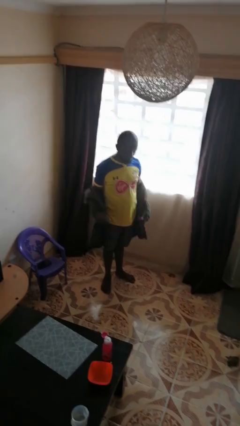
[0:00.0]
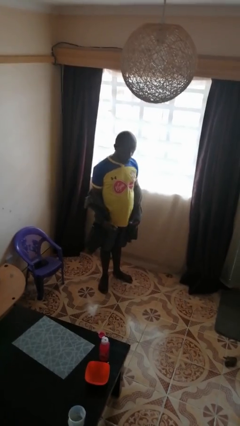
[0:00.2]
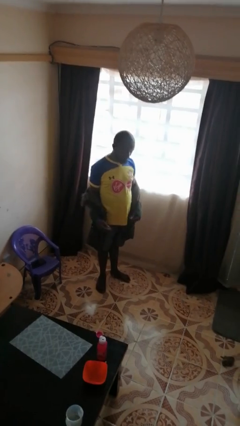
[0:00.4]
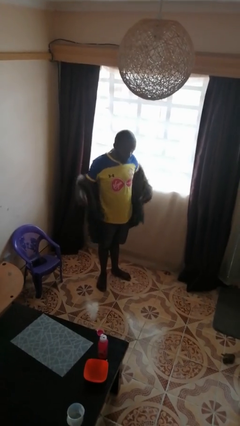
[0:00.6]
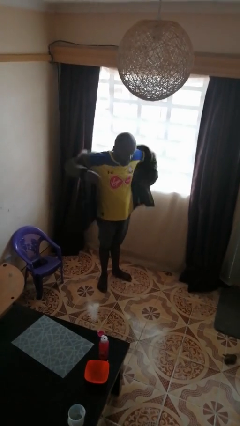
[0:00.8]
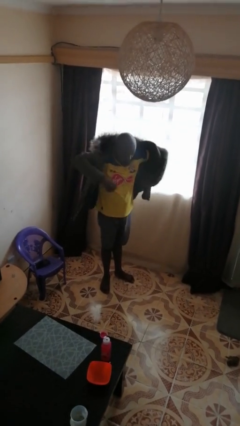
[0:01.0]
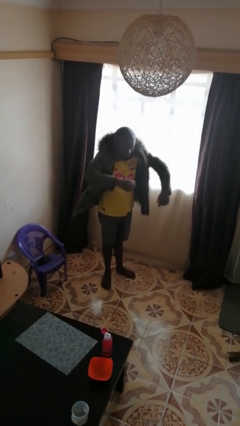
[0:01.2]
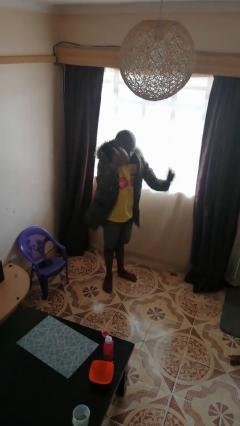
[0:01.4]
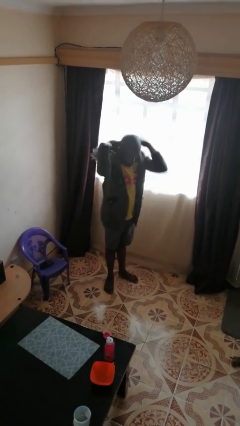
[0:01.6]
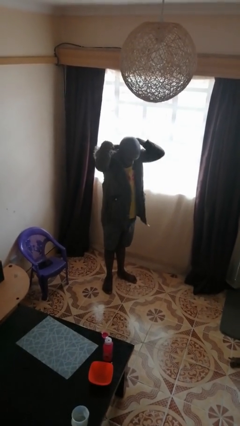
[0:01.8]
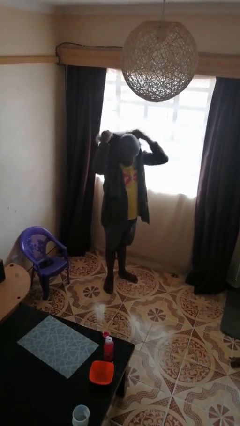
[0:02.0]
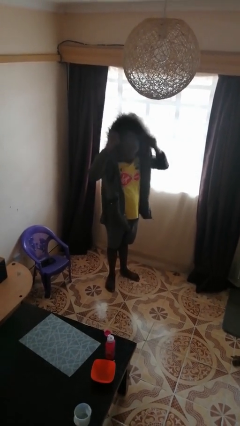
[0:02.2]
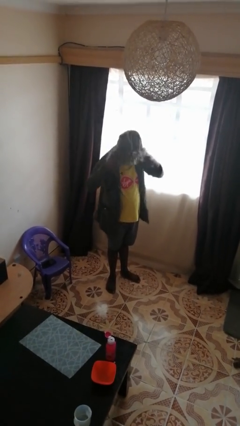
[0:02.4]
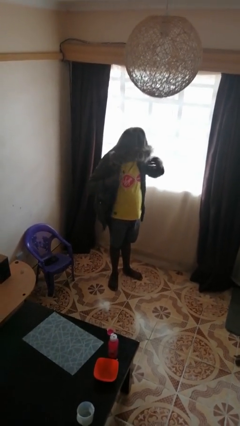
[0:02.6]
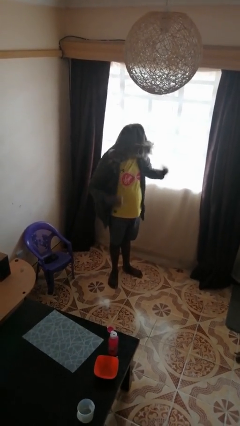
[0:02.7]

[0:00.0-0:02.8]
person puts on hoodie

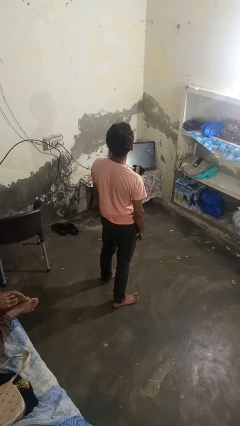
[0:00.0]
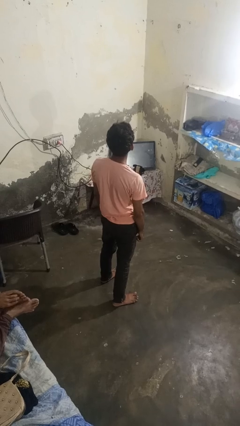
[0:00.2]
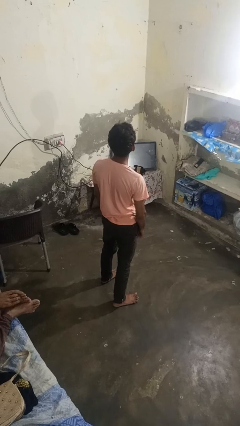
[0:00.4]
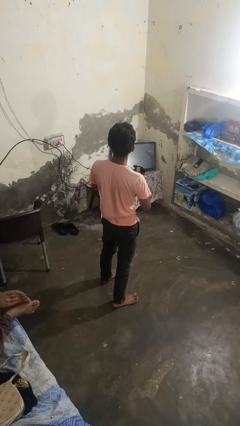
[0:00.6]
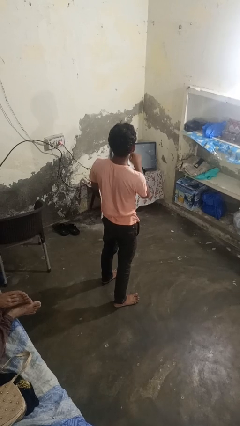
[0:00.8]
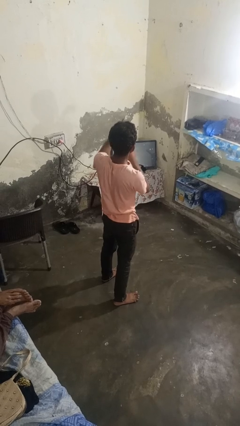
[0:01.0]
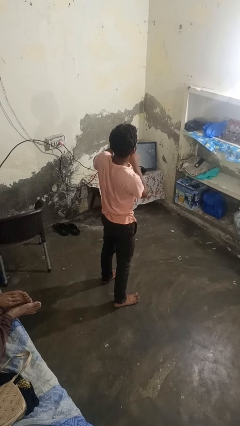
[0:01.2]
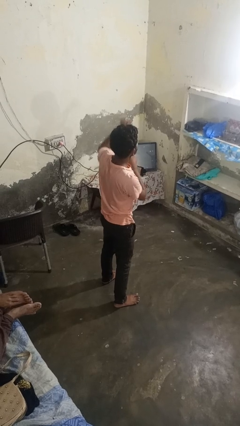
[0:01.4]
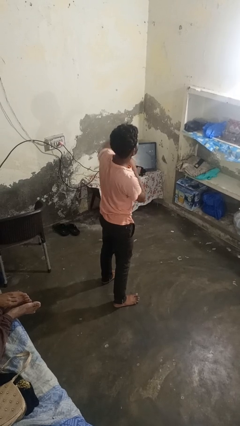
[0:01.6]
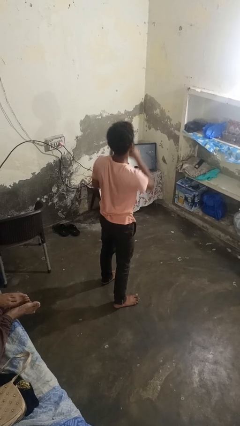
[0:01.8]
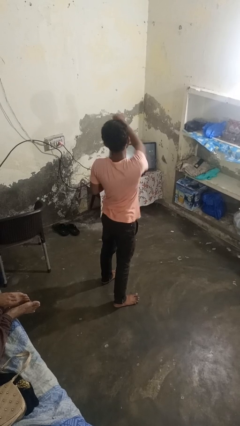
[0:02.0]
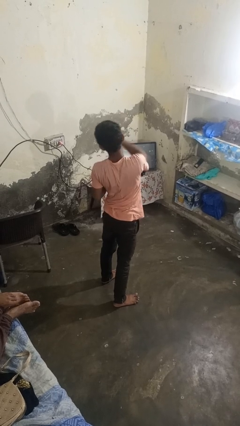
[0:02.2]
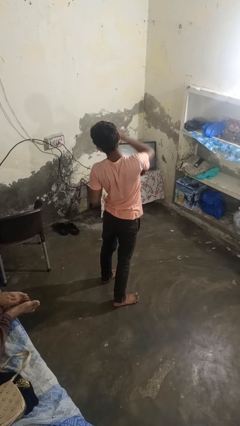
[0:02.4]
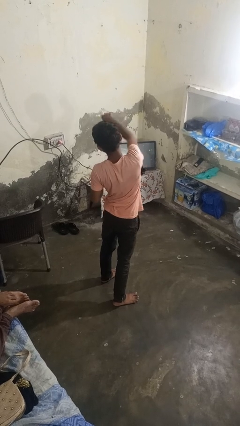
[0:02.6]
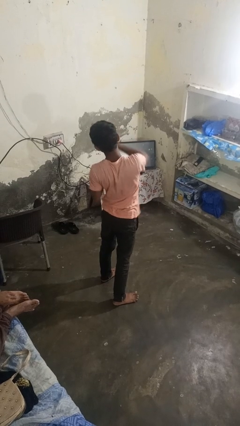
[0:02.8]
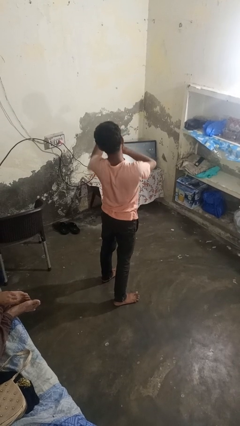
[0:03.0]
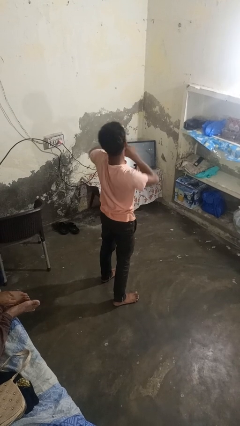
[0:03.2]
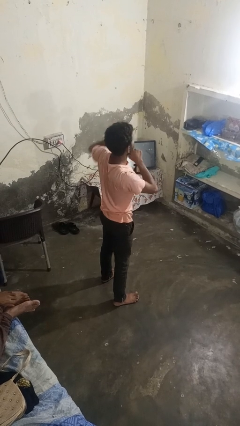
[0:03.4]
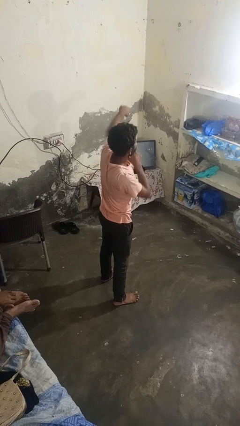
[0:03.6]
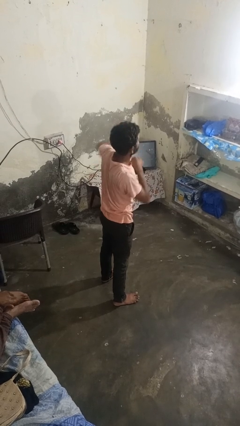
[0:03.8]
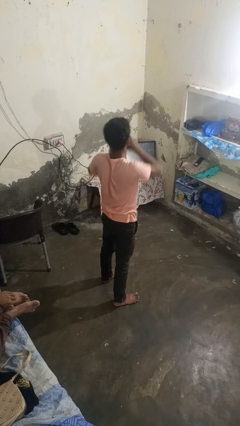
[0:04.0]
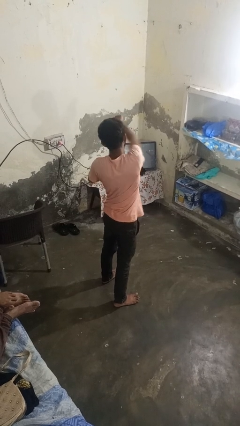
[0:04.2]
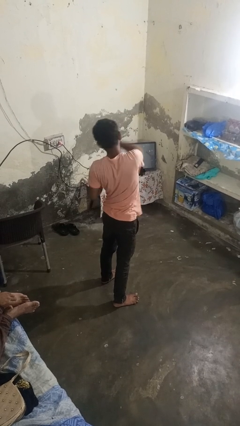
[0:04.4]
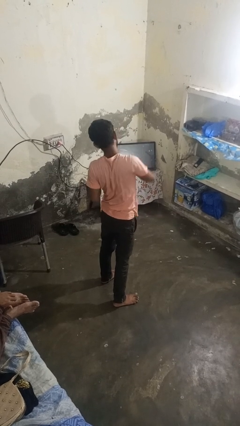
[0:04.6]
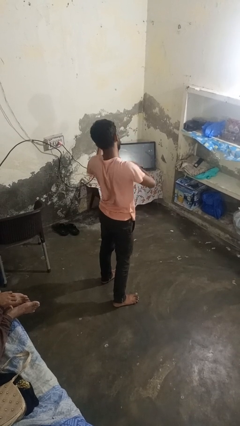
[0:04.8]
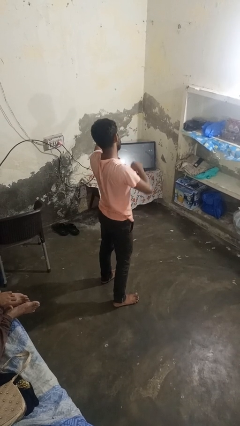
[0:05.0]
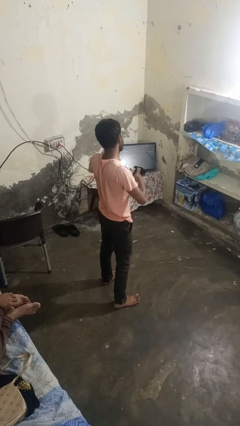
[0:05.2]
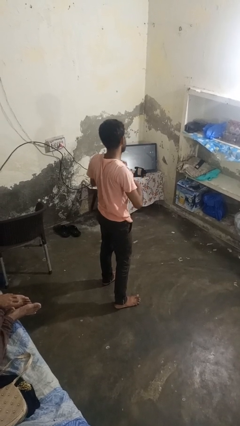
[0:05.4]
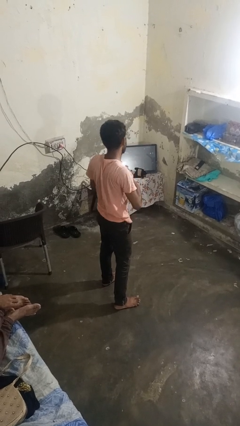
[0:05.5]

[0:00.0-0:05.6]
person punches

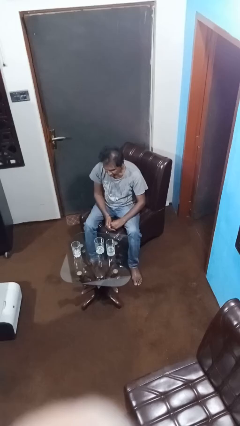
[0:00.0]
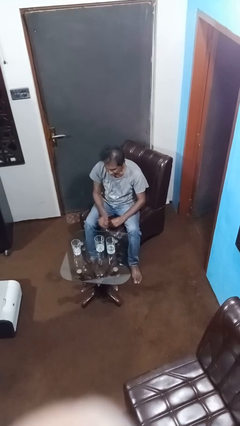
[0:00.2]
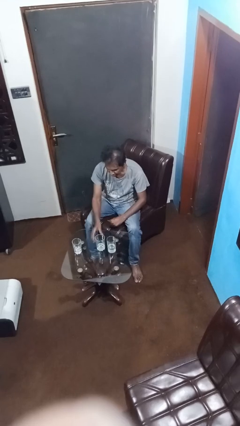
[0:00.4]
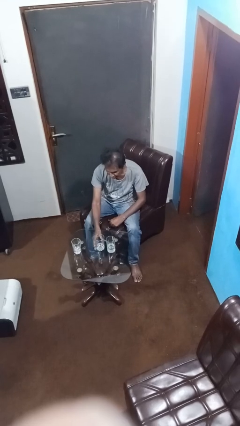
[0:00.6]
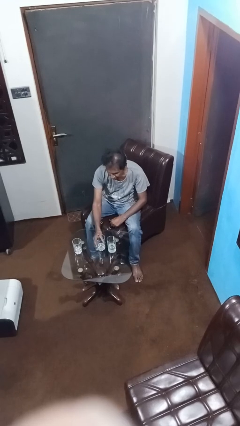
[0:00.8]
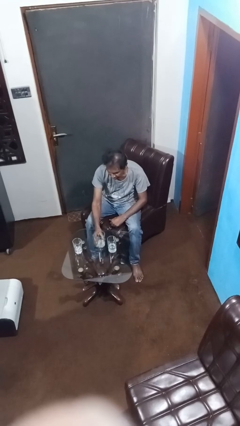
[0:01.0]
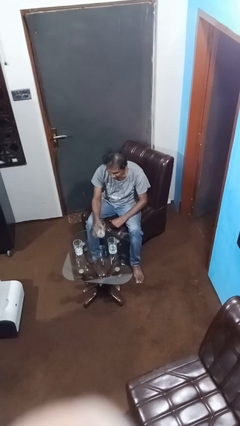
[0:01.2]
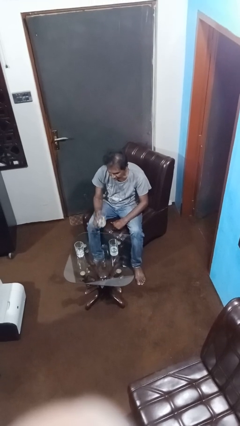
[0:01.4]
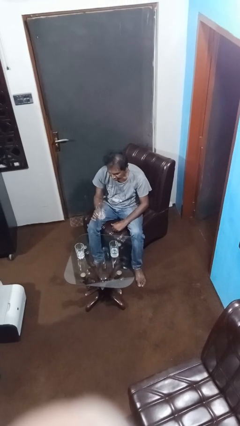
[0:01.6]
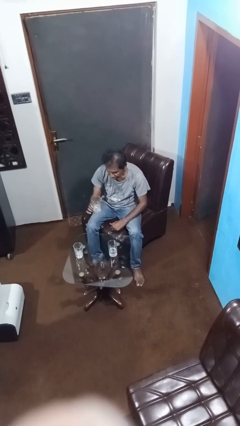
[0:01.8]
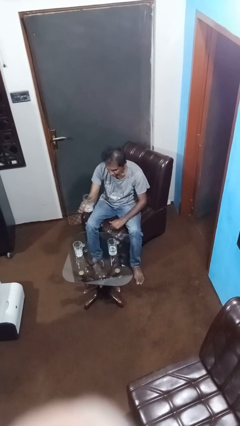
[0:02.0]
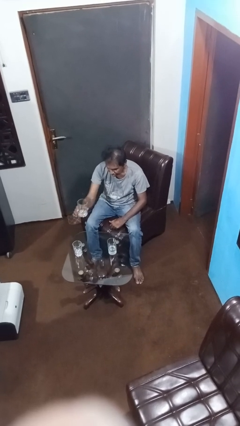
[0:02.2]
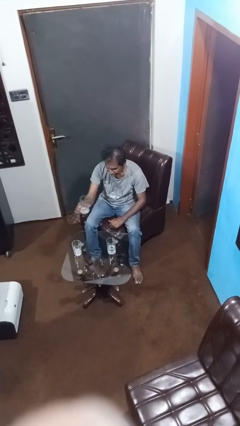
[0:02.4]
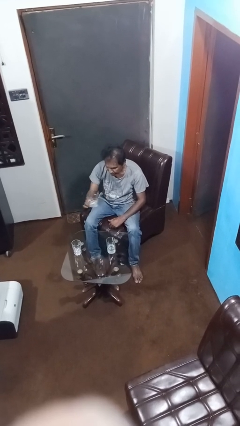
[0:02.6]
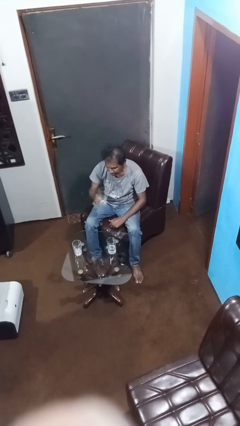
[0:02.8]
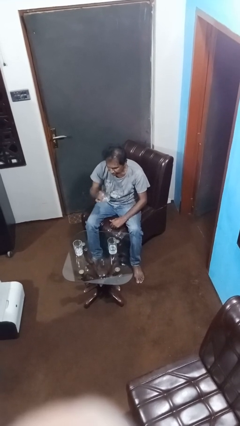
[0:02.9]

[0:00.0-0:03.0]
person picks up object from table

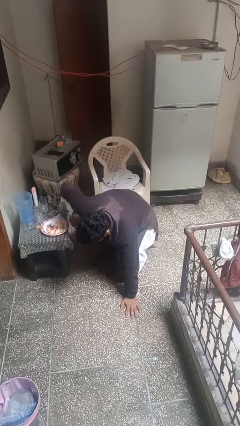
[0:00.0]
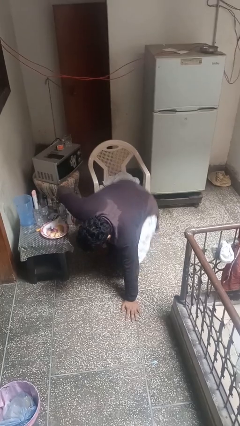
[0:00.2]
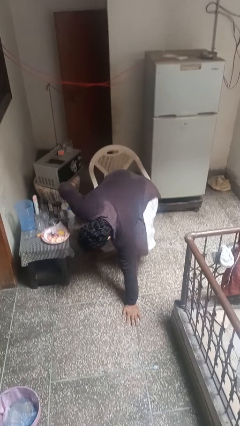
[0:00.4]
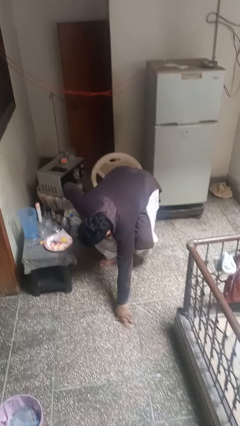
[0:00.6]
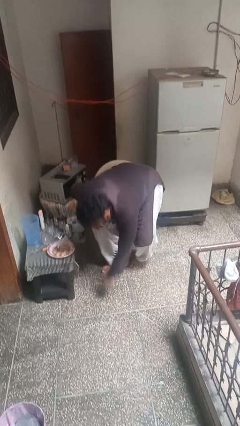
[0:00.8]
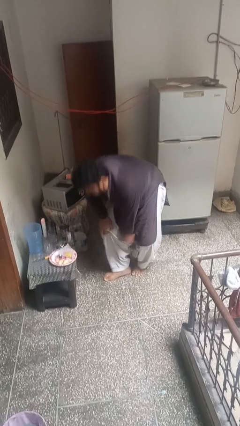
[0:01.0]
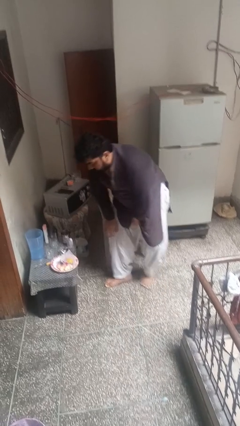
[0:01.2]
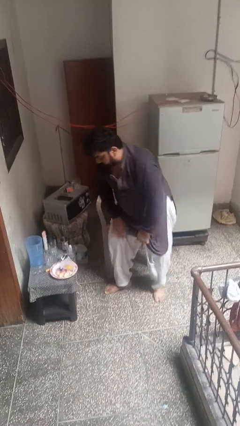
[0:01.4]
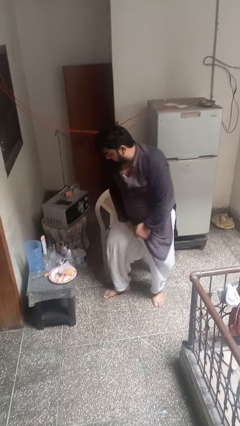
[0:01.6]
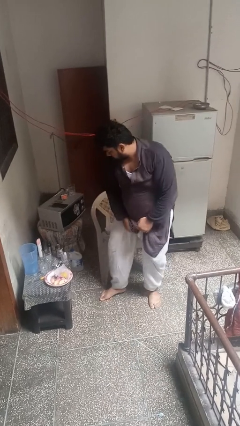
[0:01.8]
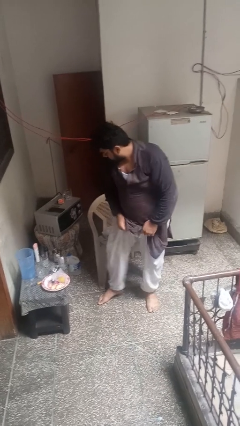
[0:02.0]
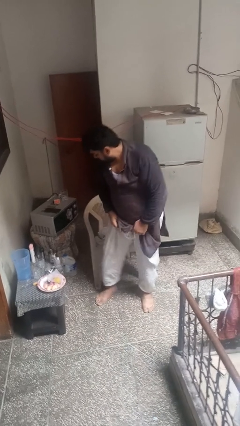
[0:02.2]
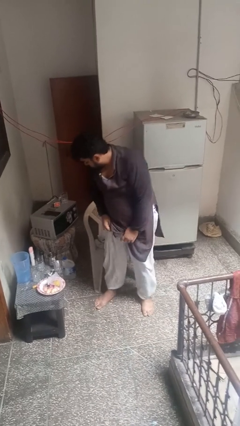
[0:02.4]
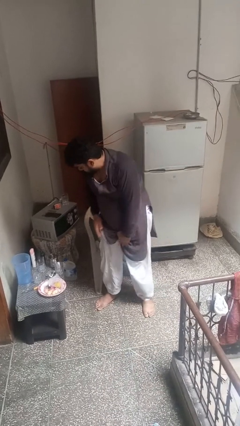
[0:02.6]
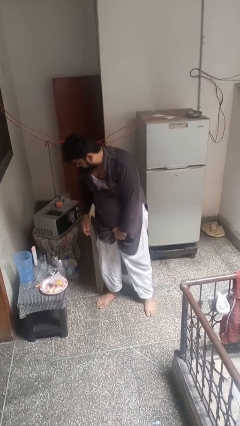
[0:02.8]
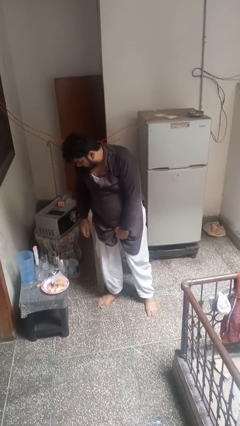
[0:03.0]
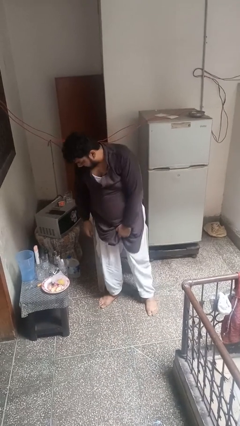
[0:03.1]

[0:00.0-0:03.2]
person stands up from floor

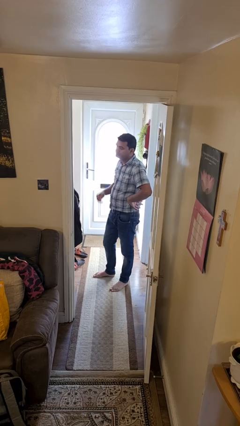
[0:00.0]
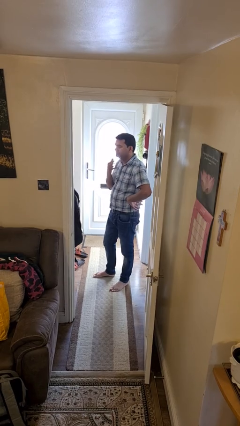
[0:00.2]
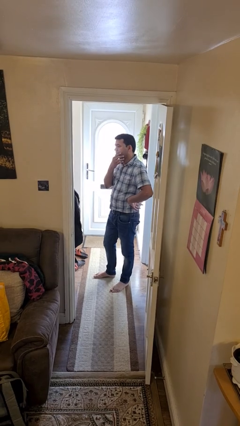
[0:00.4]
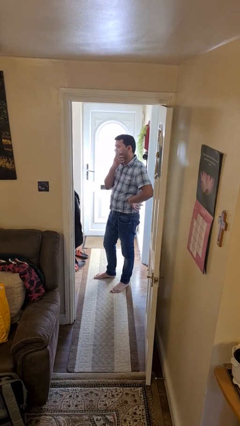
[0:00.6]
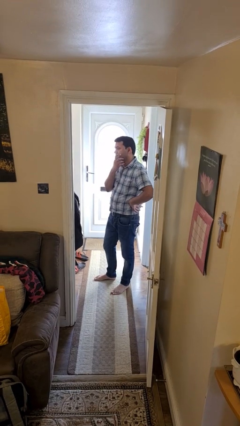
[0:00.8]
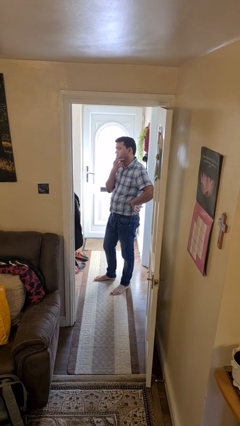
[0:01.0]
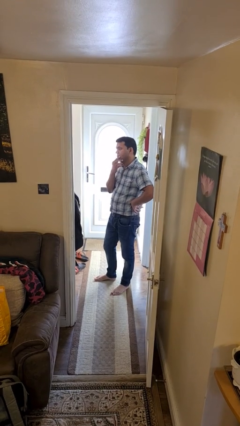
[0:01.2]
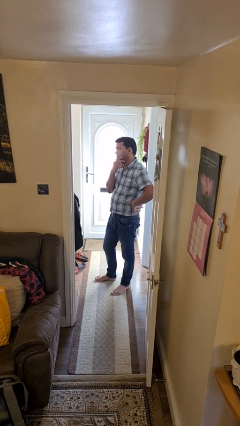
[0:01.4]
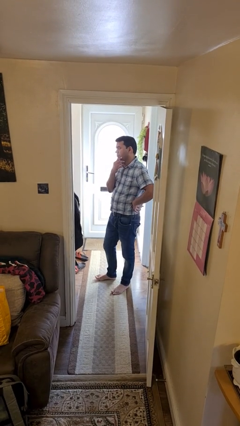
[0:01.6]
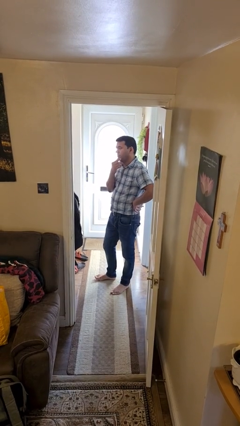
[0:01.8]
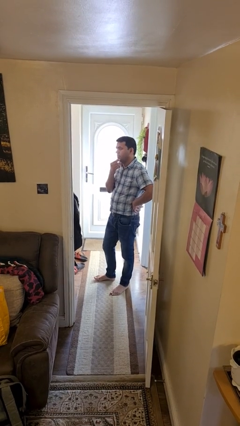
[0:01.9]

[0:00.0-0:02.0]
person strokes chin

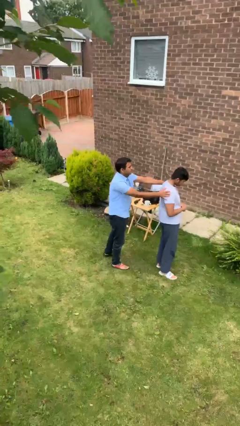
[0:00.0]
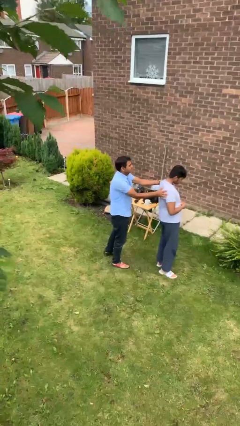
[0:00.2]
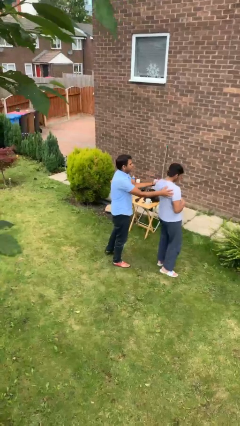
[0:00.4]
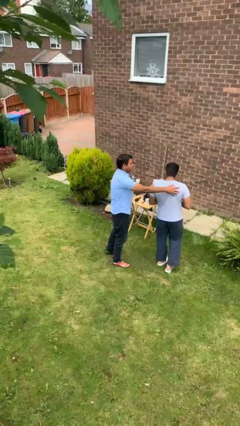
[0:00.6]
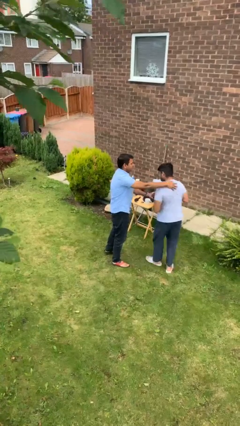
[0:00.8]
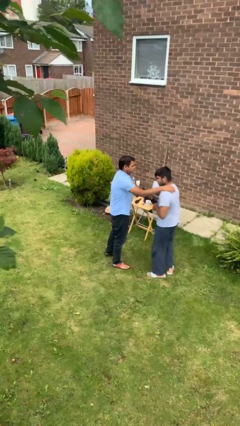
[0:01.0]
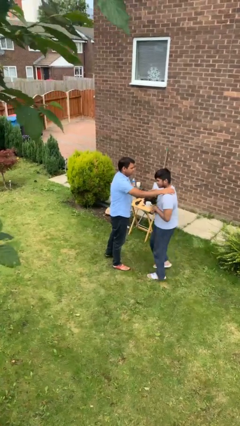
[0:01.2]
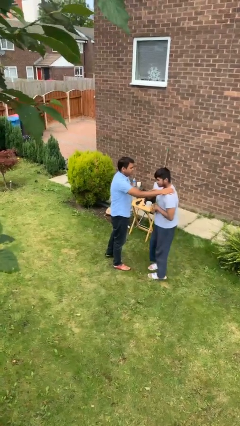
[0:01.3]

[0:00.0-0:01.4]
person spins person around
